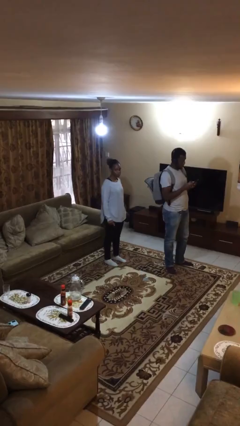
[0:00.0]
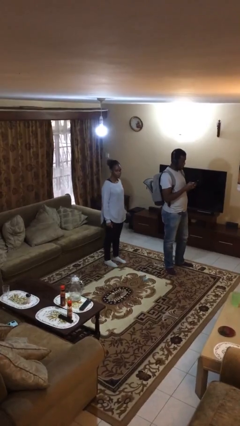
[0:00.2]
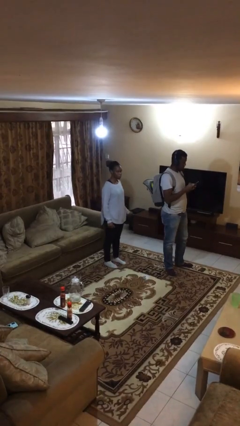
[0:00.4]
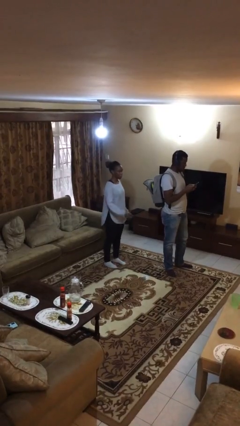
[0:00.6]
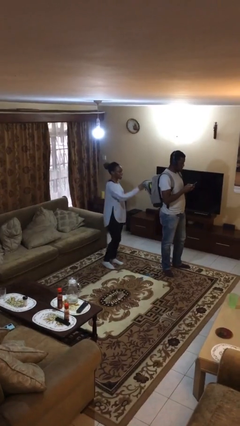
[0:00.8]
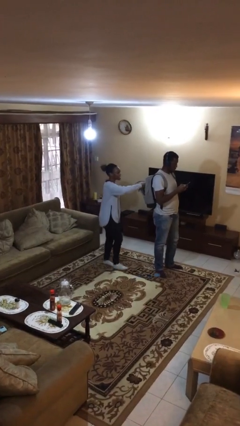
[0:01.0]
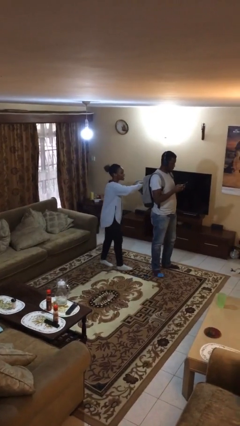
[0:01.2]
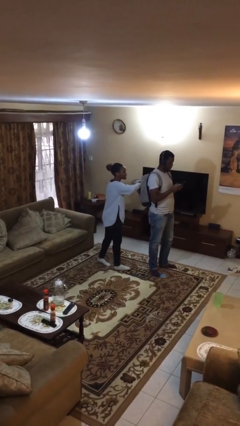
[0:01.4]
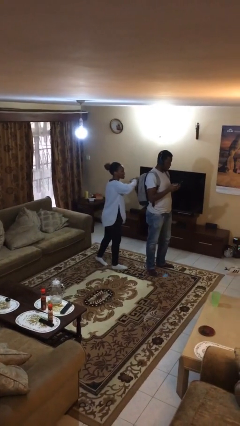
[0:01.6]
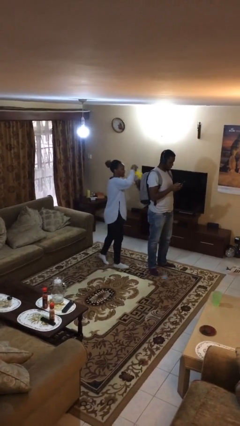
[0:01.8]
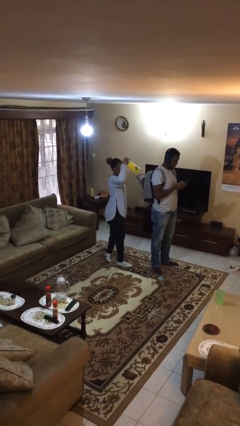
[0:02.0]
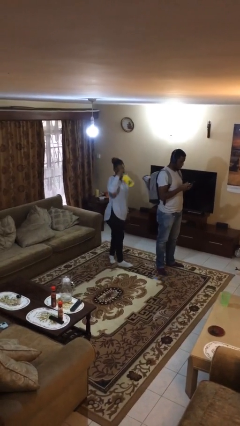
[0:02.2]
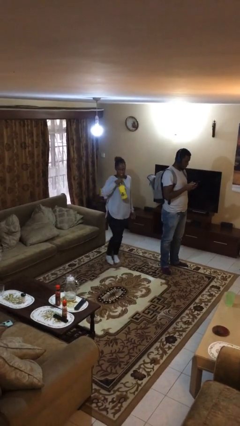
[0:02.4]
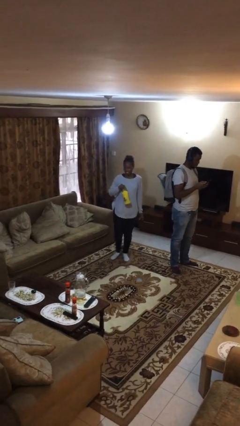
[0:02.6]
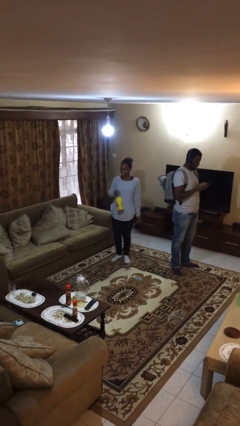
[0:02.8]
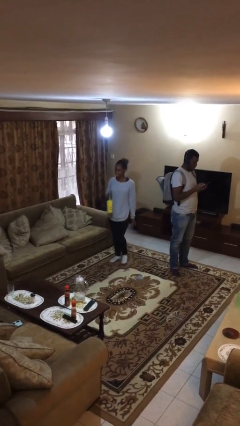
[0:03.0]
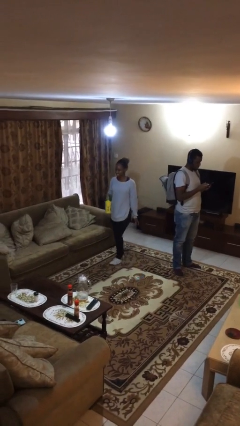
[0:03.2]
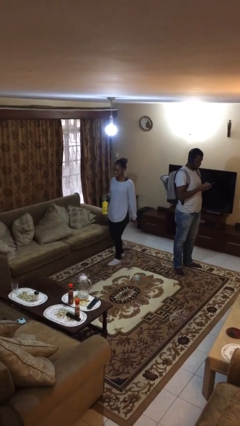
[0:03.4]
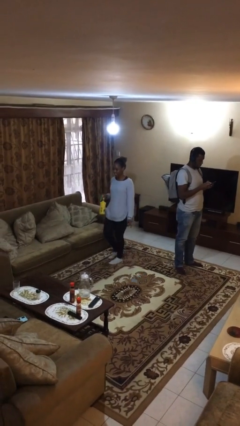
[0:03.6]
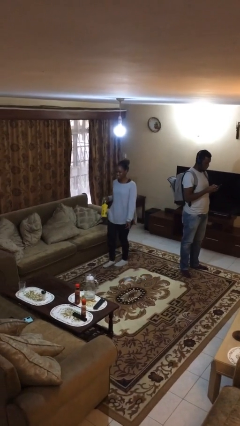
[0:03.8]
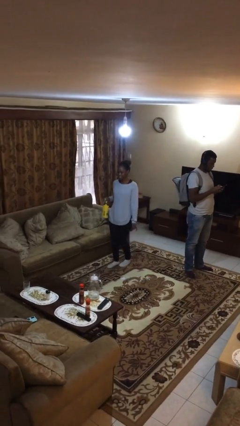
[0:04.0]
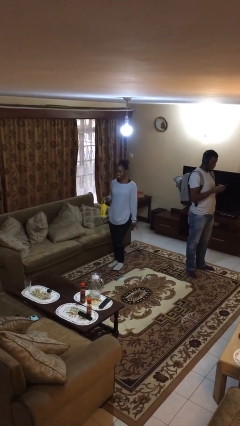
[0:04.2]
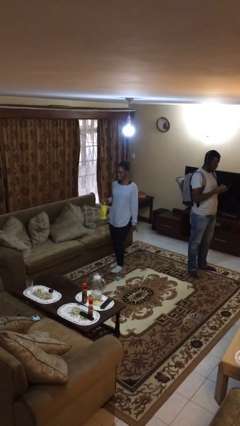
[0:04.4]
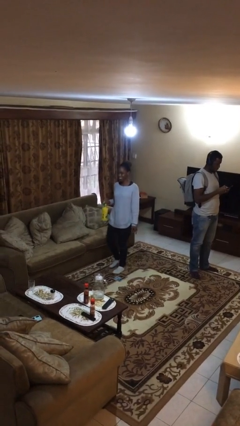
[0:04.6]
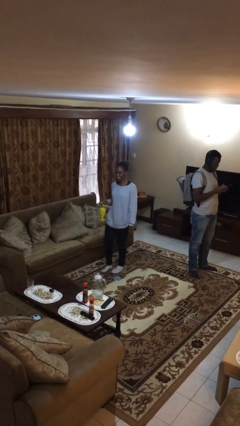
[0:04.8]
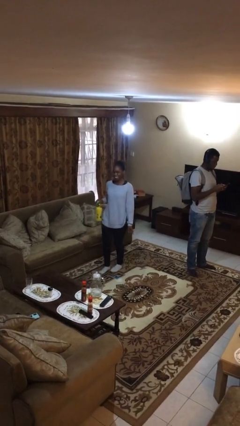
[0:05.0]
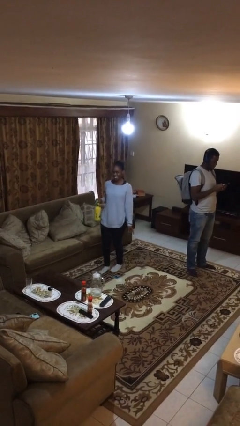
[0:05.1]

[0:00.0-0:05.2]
person steals object from person

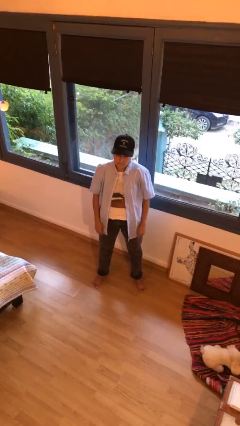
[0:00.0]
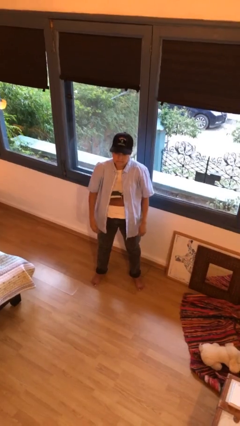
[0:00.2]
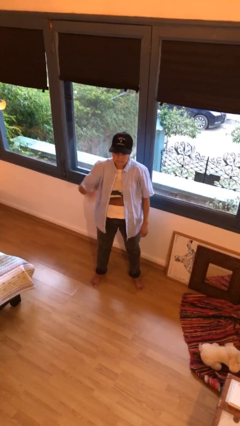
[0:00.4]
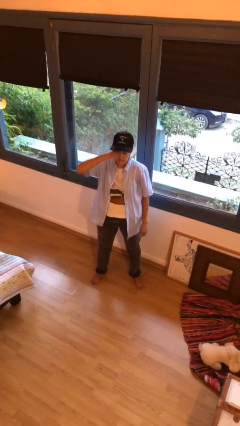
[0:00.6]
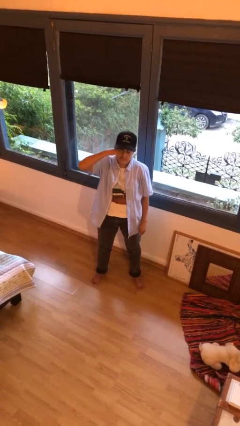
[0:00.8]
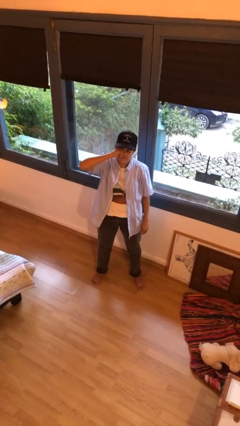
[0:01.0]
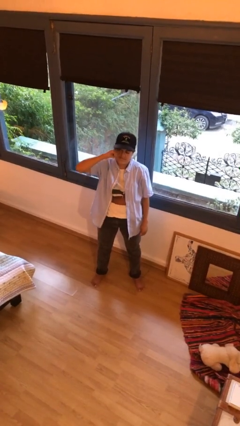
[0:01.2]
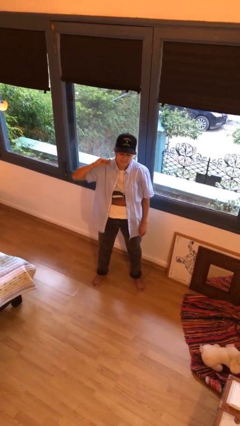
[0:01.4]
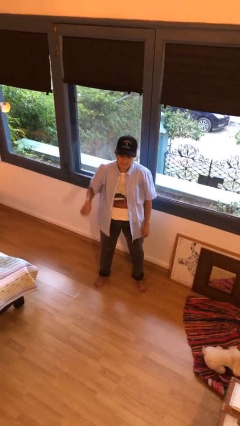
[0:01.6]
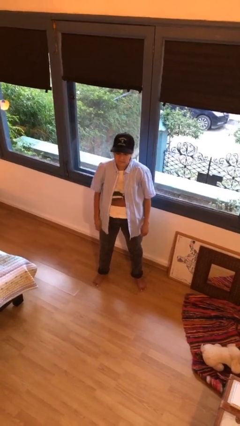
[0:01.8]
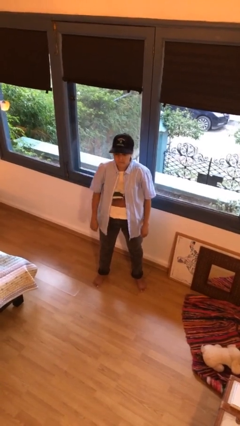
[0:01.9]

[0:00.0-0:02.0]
person rubs eyes

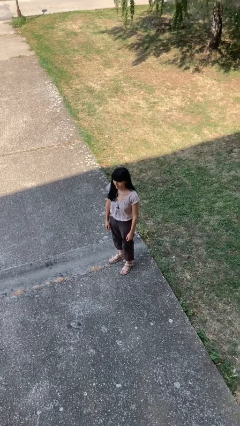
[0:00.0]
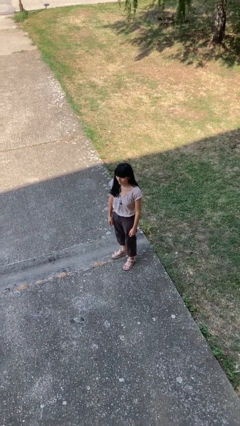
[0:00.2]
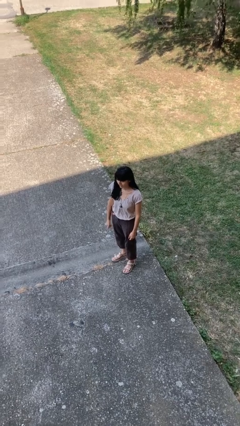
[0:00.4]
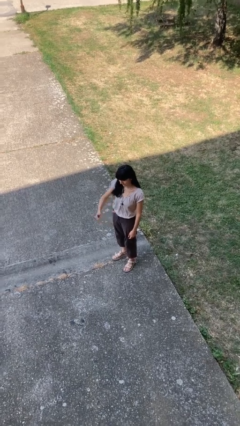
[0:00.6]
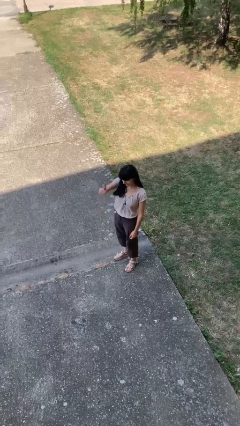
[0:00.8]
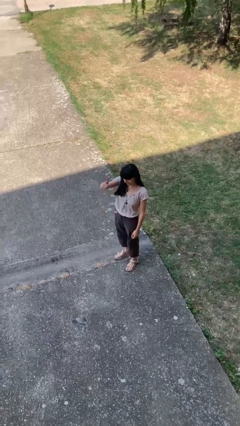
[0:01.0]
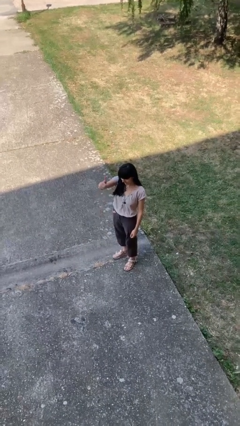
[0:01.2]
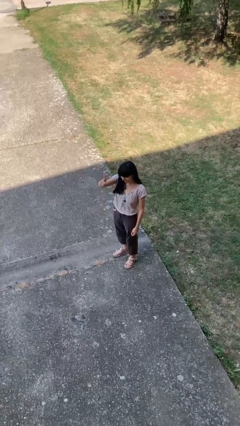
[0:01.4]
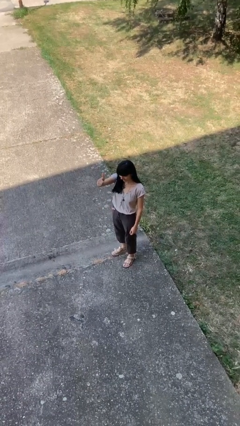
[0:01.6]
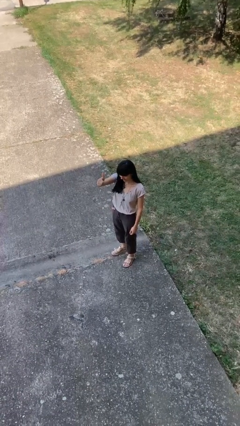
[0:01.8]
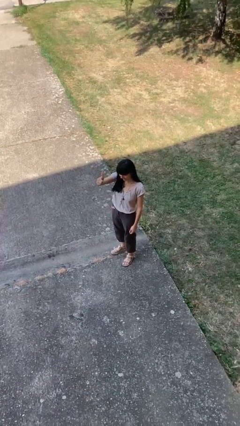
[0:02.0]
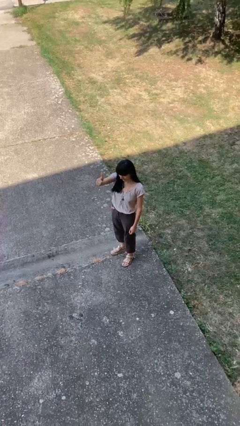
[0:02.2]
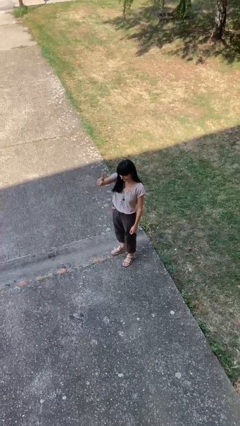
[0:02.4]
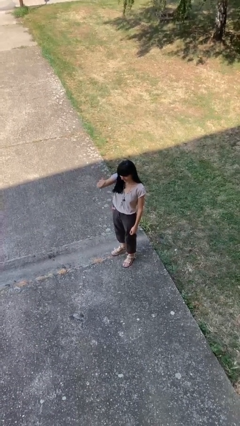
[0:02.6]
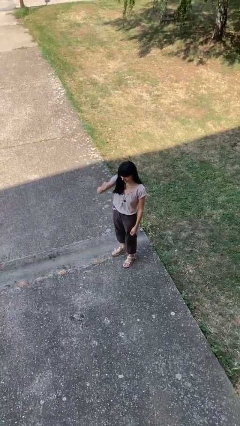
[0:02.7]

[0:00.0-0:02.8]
person gestures thumbs up

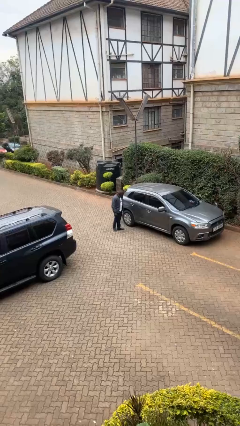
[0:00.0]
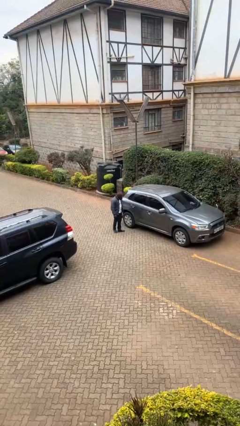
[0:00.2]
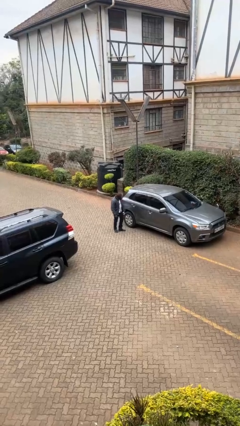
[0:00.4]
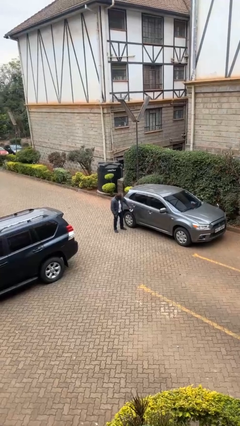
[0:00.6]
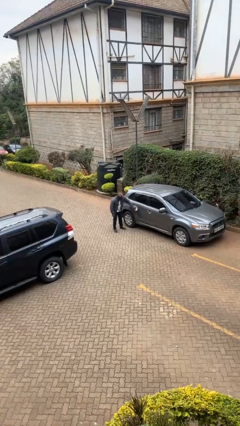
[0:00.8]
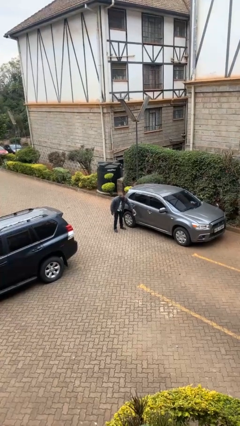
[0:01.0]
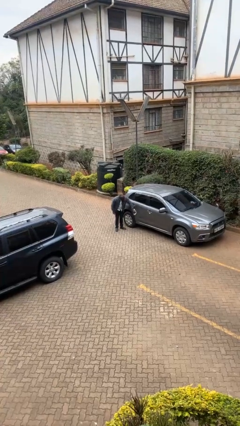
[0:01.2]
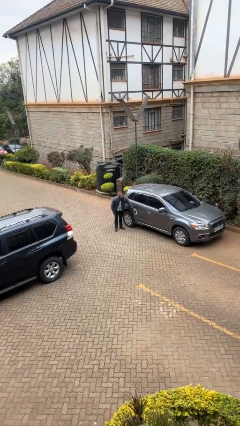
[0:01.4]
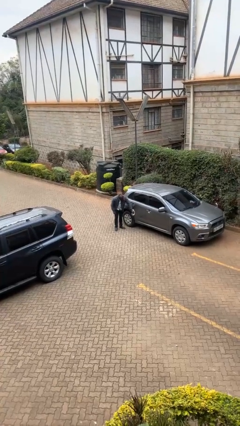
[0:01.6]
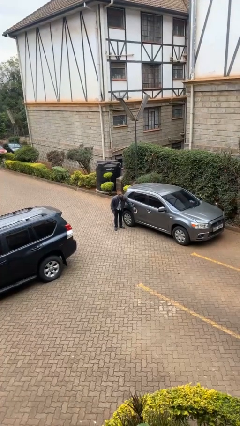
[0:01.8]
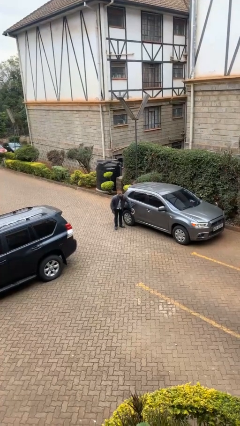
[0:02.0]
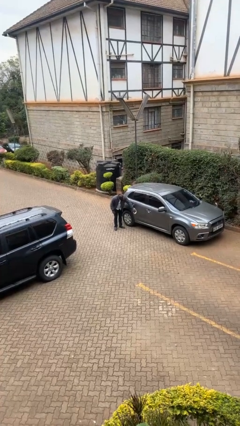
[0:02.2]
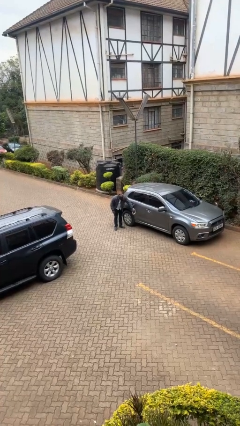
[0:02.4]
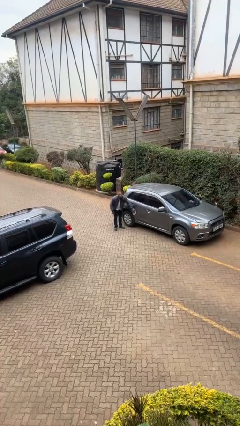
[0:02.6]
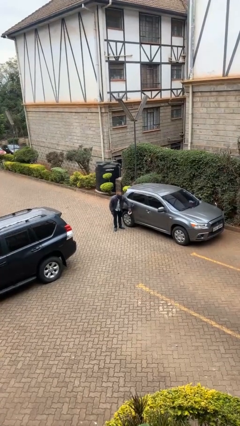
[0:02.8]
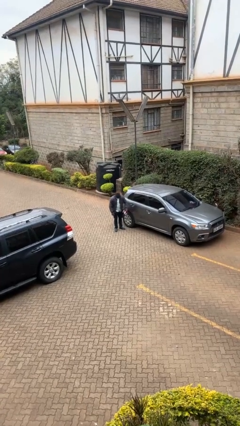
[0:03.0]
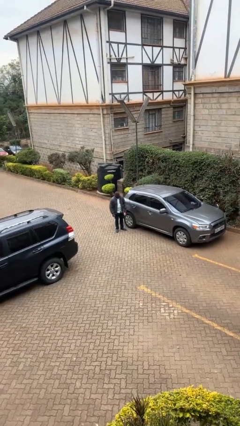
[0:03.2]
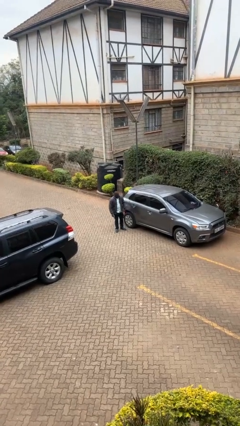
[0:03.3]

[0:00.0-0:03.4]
person polishes car with rag

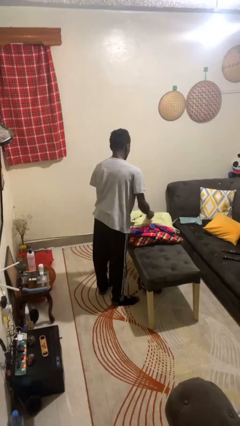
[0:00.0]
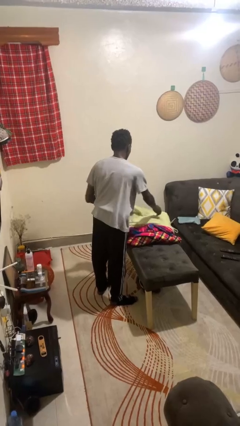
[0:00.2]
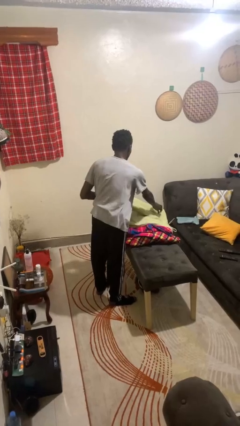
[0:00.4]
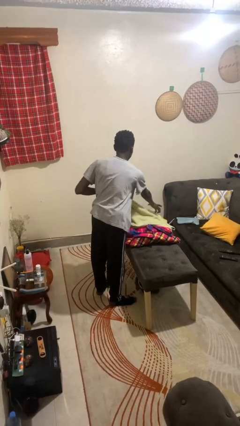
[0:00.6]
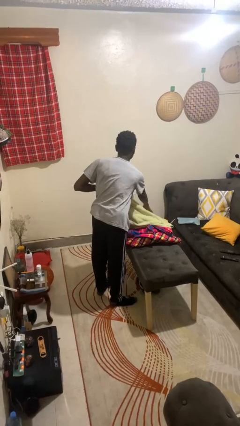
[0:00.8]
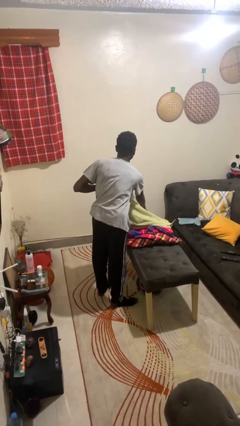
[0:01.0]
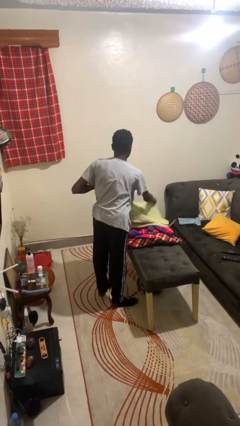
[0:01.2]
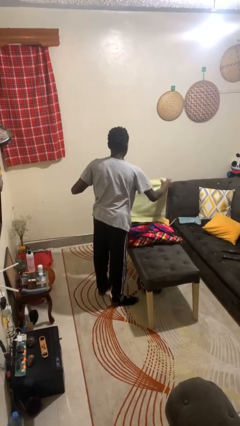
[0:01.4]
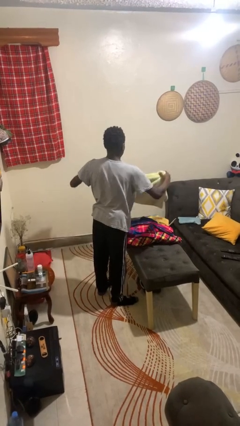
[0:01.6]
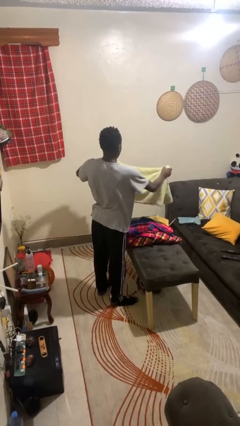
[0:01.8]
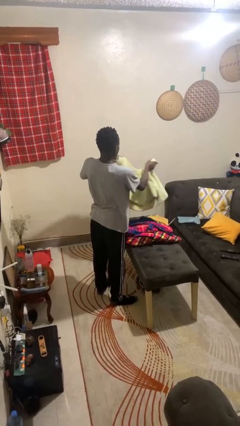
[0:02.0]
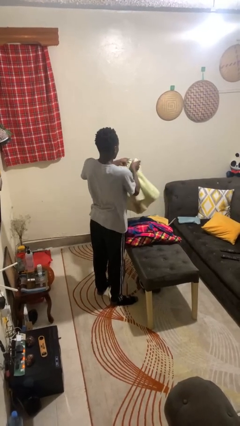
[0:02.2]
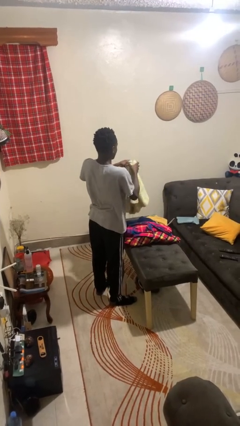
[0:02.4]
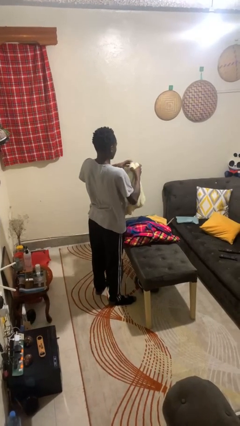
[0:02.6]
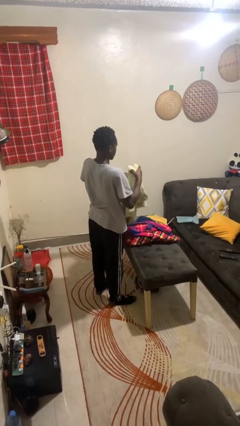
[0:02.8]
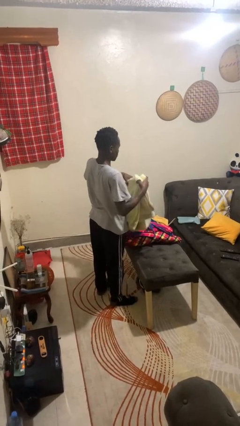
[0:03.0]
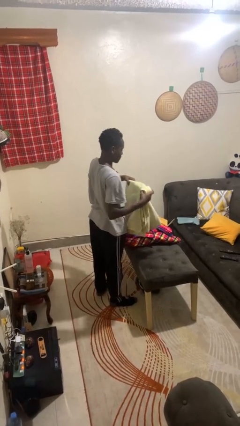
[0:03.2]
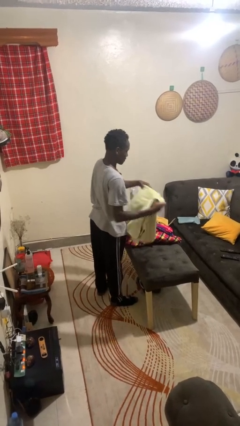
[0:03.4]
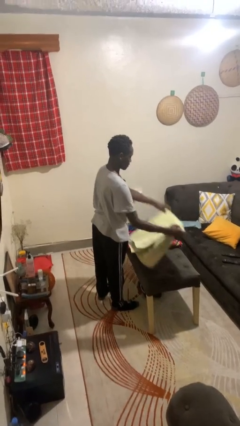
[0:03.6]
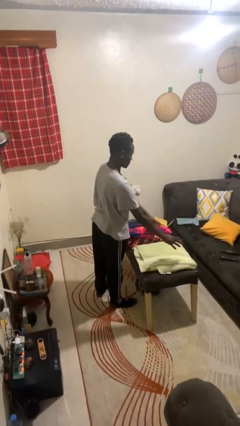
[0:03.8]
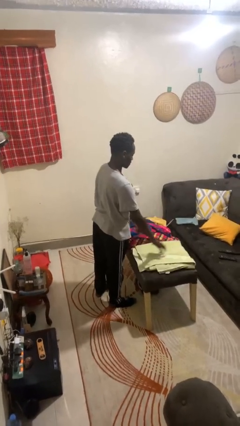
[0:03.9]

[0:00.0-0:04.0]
person folds towel
